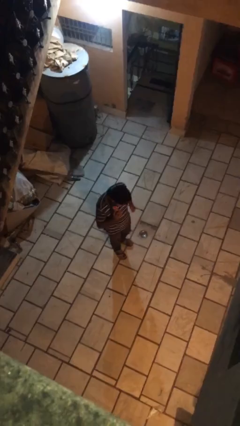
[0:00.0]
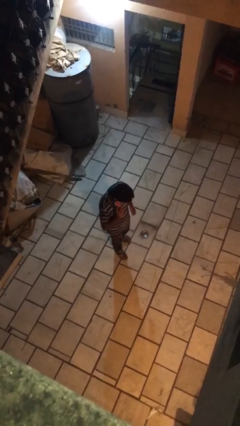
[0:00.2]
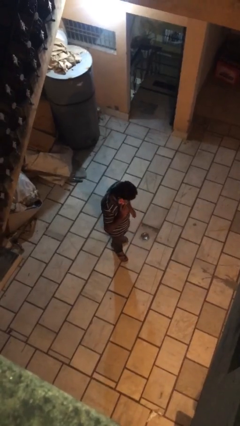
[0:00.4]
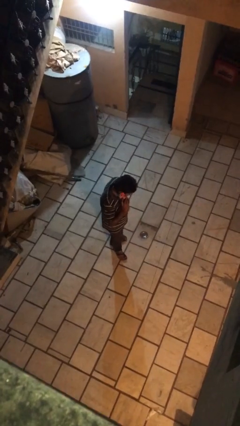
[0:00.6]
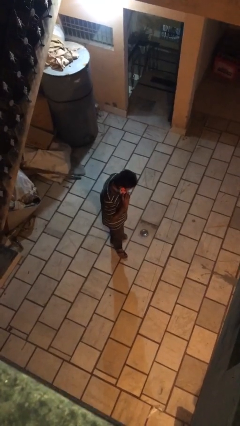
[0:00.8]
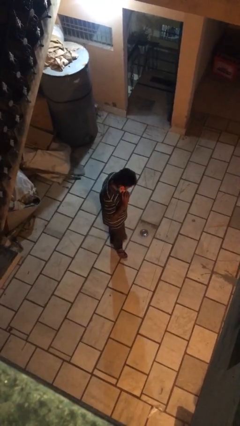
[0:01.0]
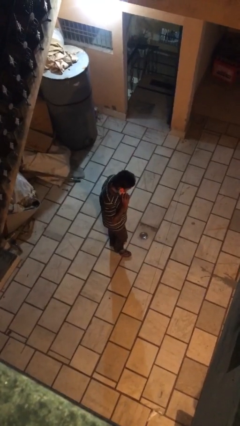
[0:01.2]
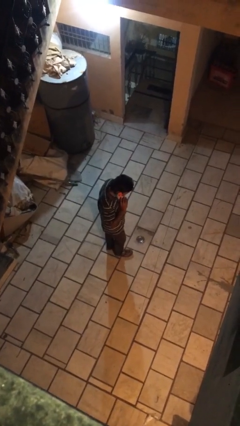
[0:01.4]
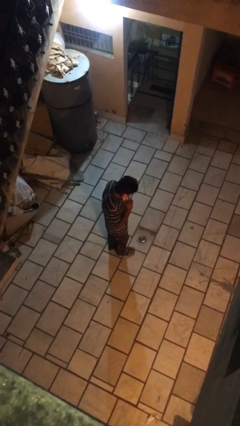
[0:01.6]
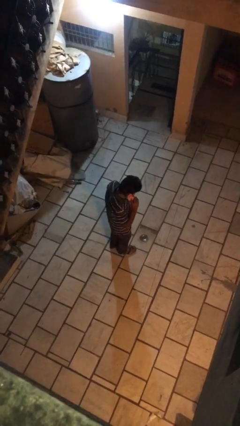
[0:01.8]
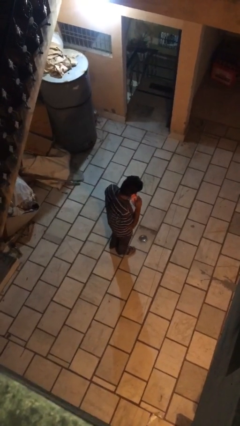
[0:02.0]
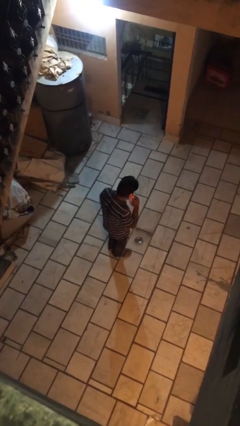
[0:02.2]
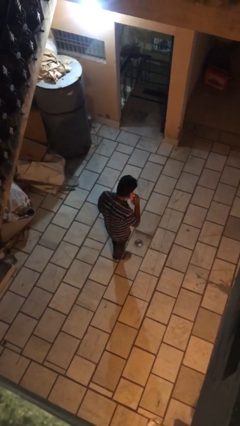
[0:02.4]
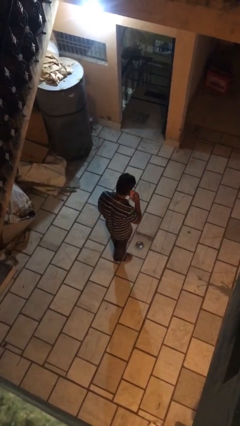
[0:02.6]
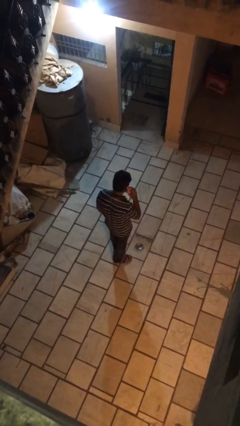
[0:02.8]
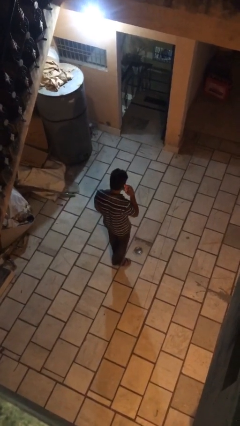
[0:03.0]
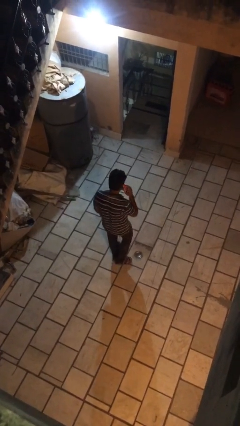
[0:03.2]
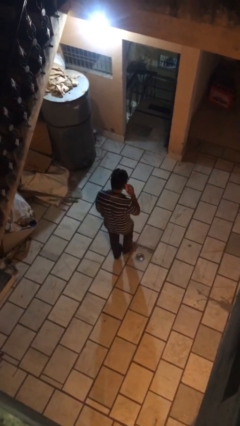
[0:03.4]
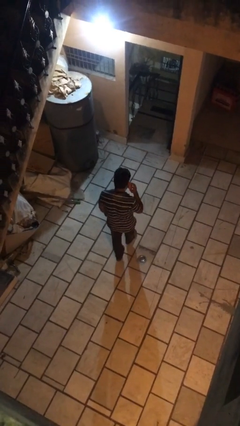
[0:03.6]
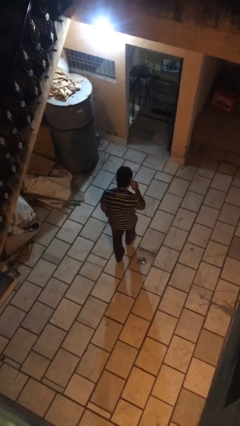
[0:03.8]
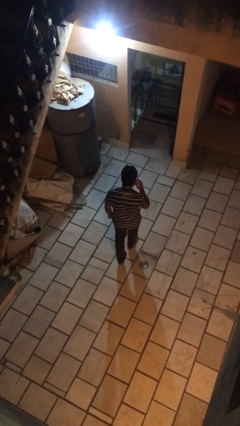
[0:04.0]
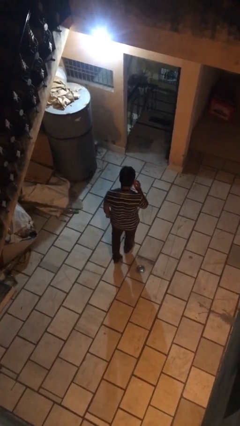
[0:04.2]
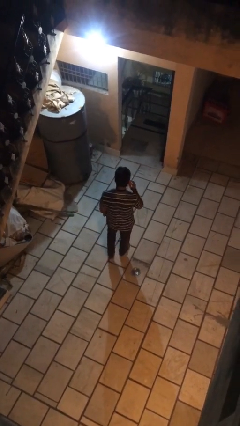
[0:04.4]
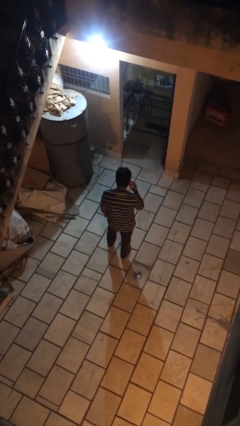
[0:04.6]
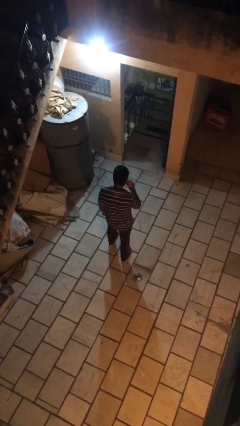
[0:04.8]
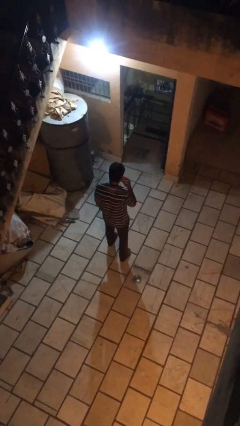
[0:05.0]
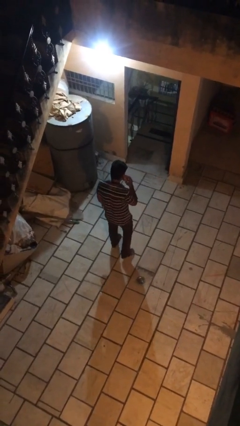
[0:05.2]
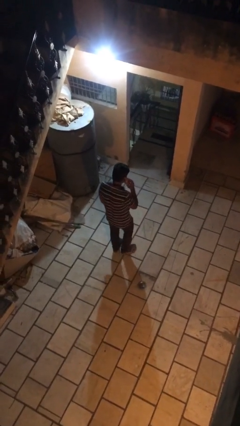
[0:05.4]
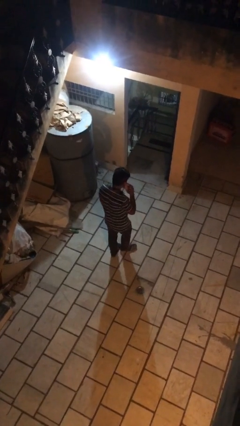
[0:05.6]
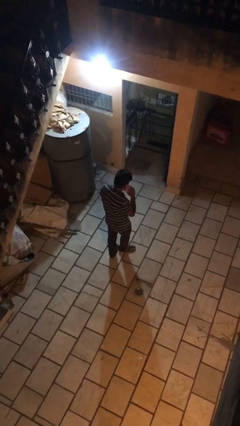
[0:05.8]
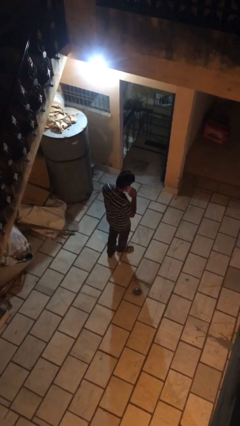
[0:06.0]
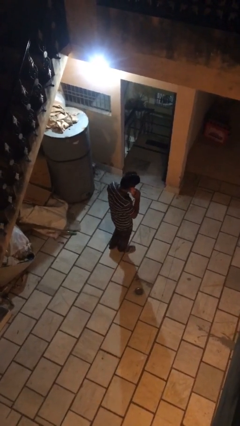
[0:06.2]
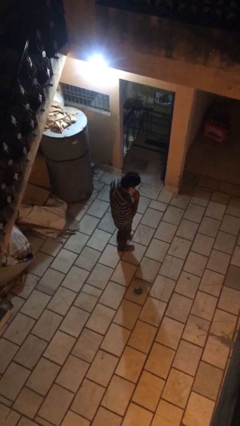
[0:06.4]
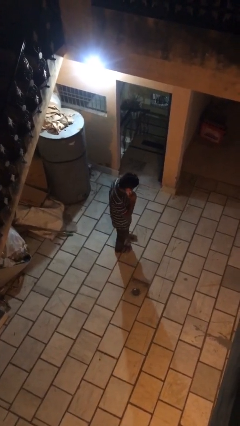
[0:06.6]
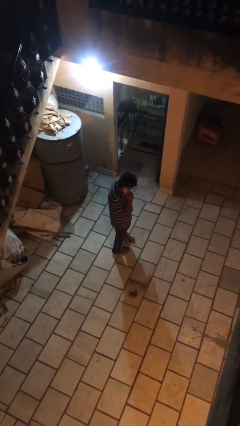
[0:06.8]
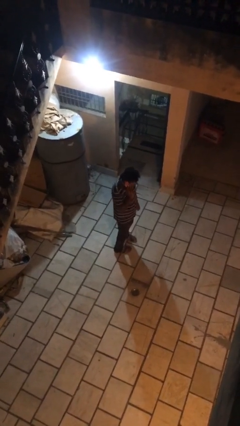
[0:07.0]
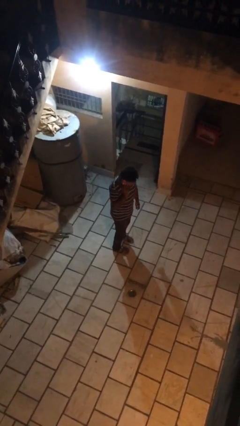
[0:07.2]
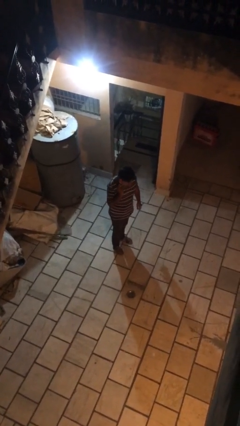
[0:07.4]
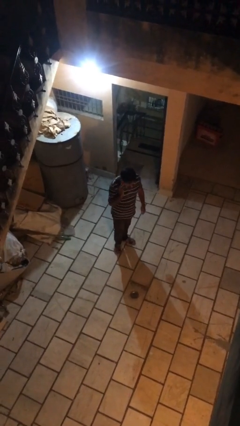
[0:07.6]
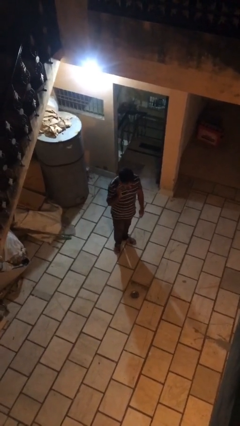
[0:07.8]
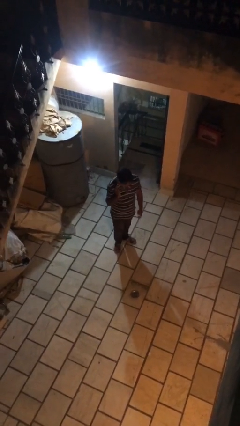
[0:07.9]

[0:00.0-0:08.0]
person talks on phone

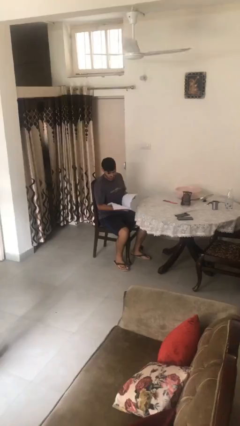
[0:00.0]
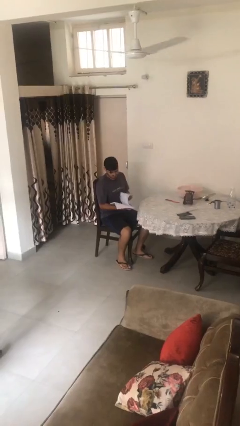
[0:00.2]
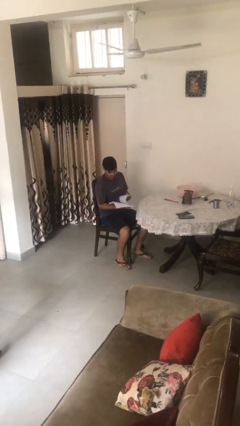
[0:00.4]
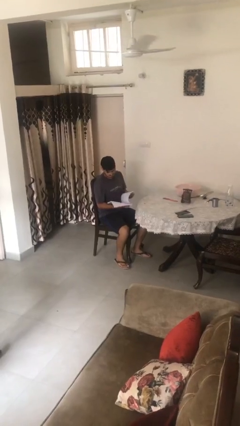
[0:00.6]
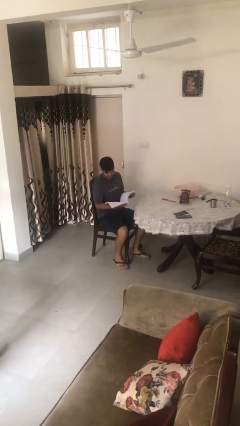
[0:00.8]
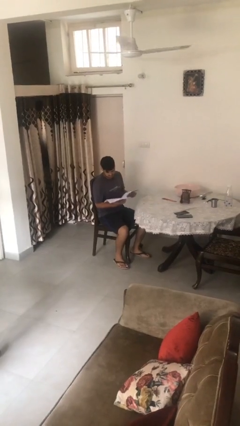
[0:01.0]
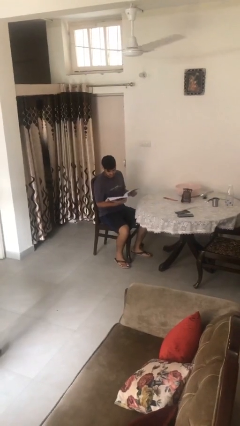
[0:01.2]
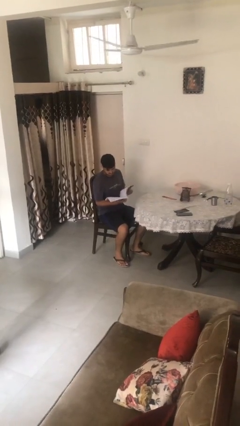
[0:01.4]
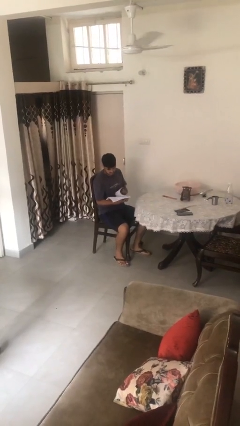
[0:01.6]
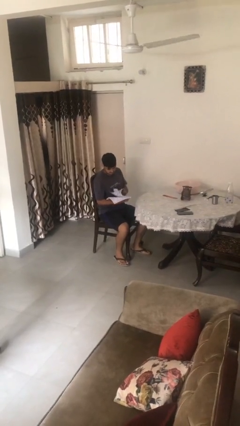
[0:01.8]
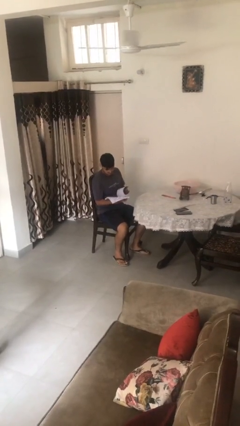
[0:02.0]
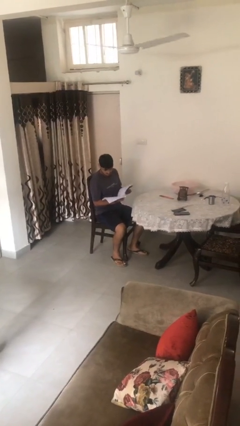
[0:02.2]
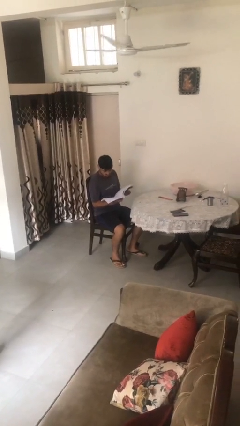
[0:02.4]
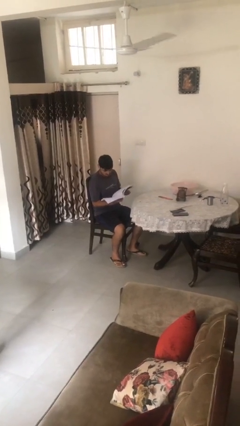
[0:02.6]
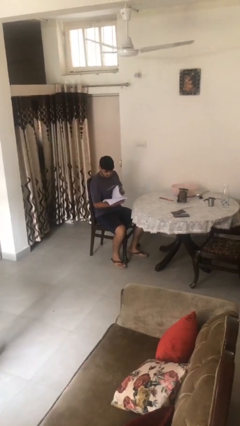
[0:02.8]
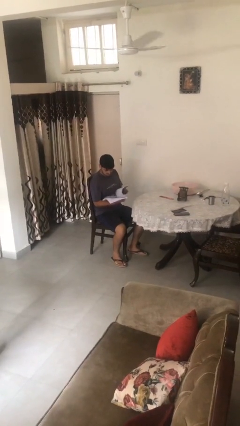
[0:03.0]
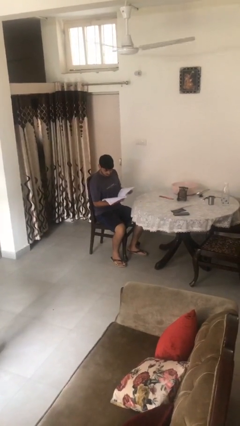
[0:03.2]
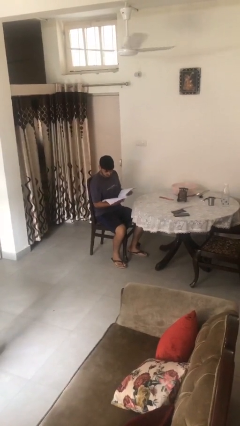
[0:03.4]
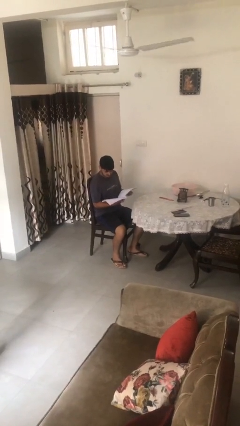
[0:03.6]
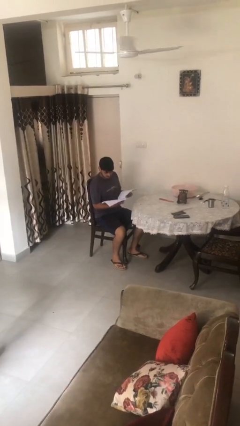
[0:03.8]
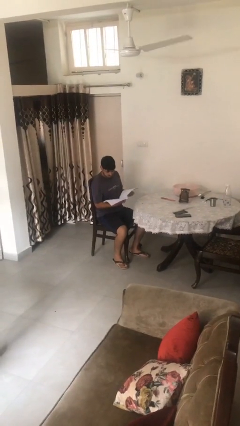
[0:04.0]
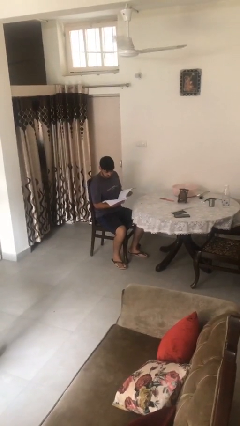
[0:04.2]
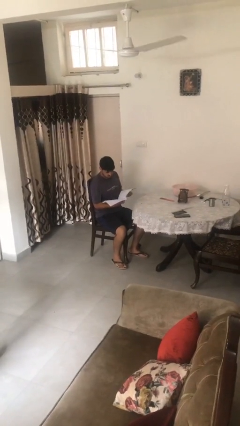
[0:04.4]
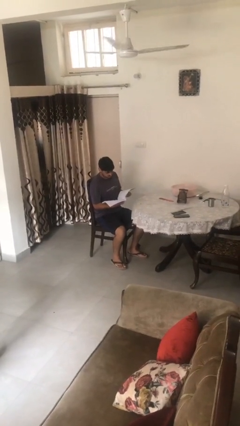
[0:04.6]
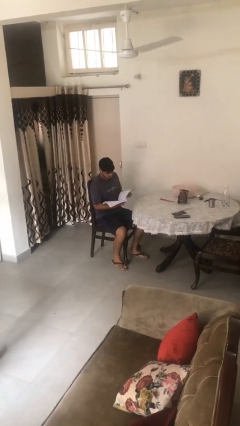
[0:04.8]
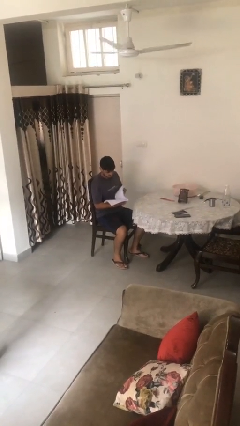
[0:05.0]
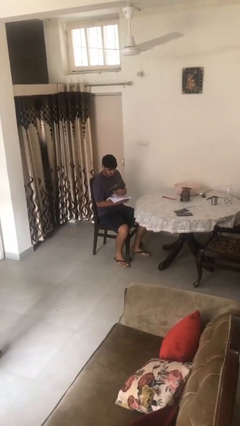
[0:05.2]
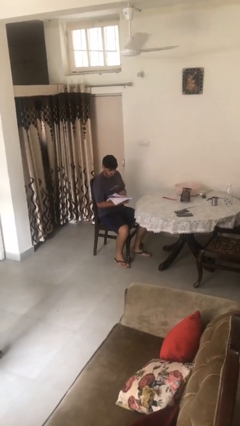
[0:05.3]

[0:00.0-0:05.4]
person reads document

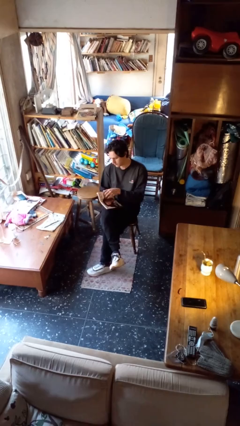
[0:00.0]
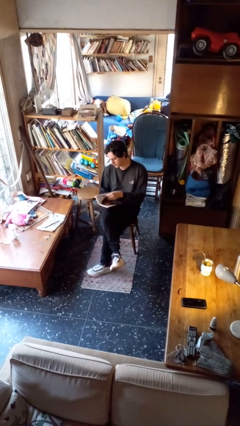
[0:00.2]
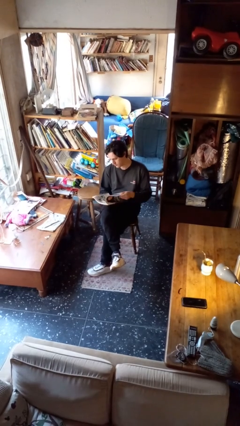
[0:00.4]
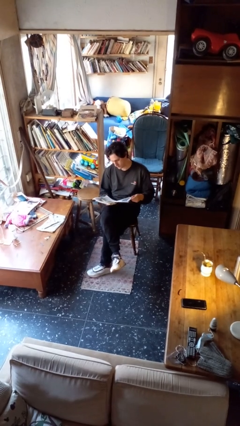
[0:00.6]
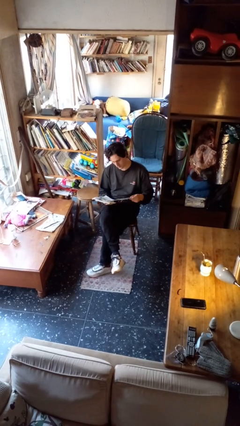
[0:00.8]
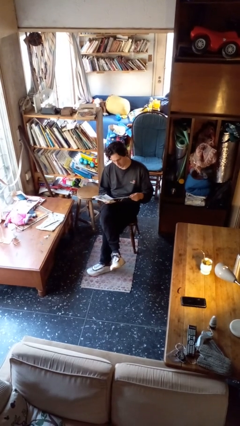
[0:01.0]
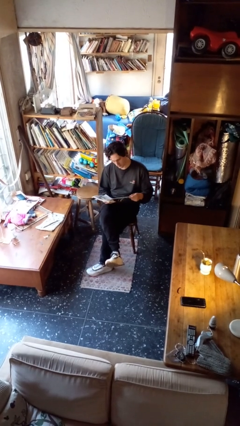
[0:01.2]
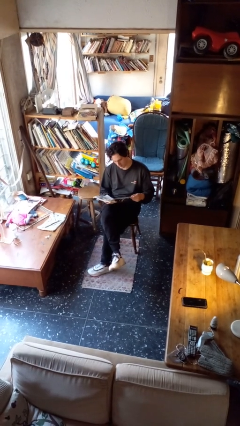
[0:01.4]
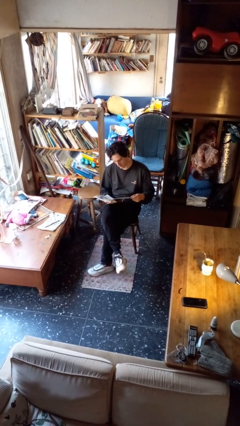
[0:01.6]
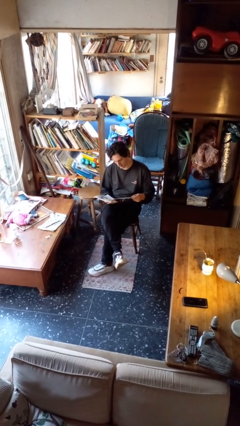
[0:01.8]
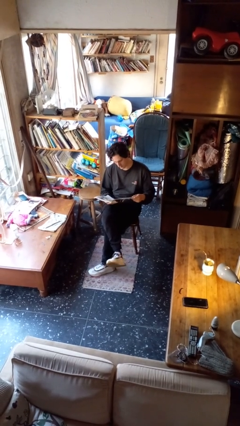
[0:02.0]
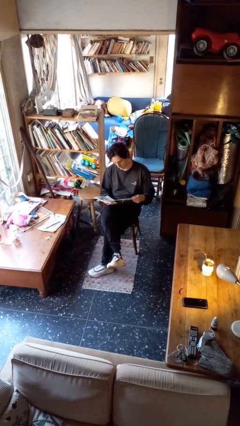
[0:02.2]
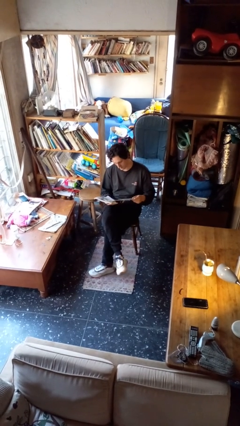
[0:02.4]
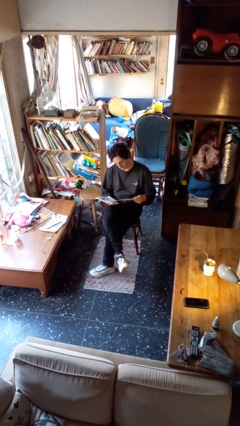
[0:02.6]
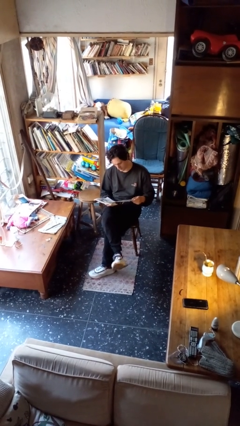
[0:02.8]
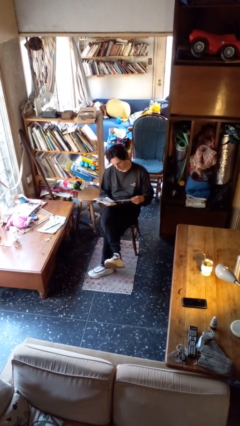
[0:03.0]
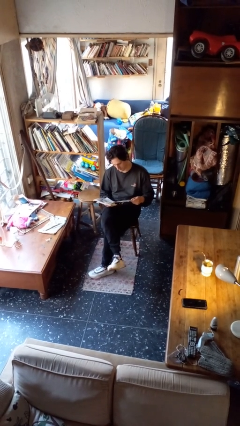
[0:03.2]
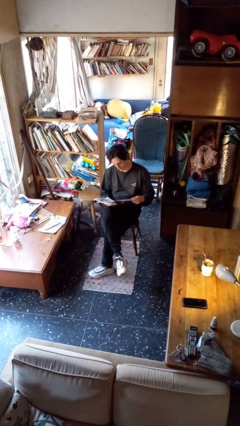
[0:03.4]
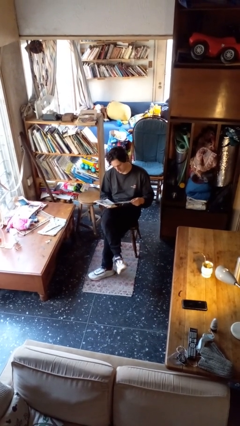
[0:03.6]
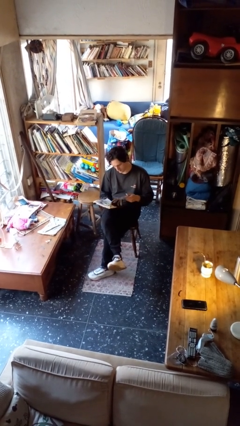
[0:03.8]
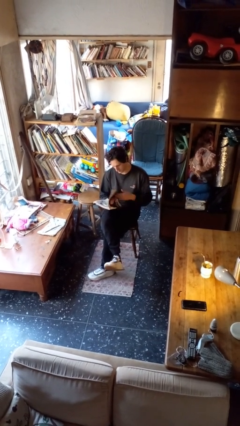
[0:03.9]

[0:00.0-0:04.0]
person reads magazine

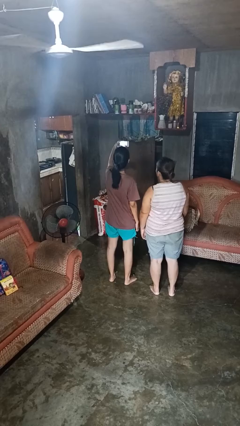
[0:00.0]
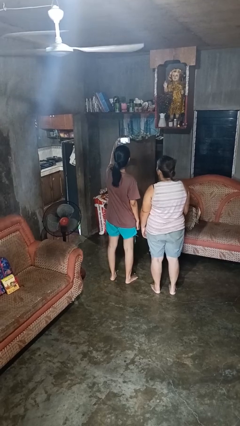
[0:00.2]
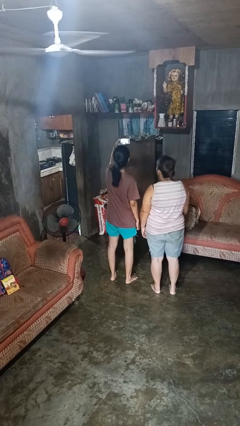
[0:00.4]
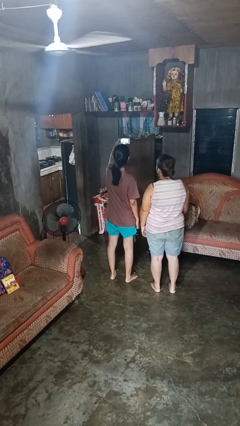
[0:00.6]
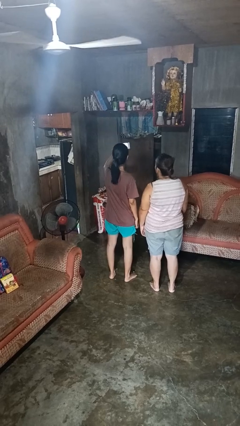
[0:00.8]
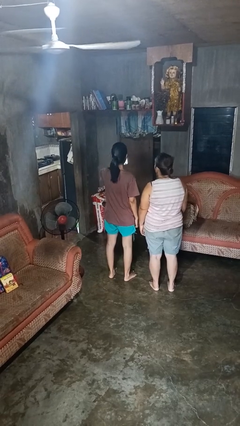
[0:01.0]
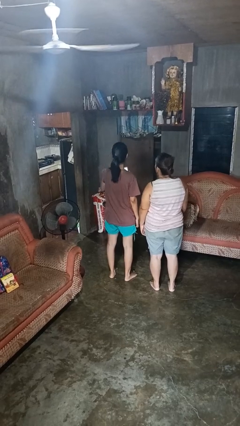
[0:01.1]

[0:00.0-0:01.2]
person takes selfie with person
